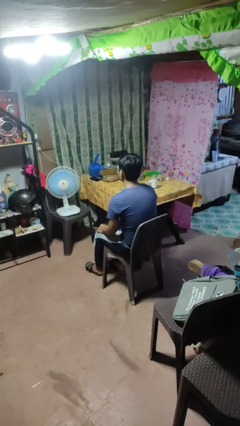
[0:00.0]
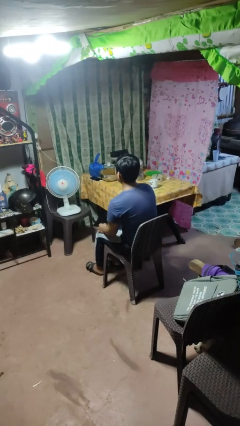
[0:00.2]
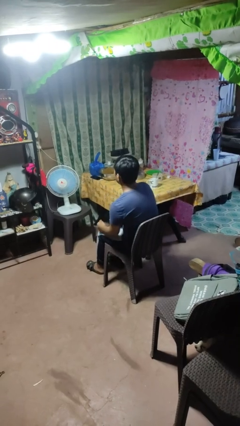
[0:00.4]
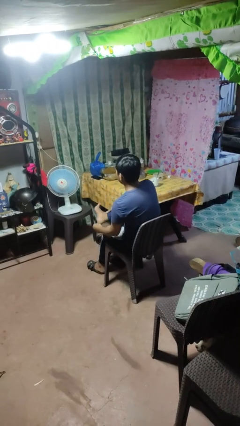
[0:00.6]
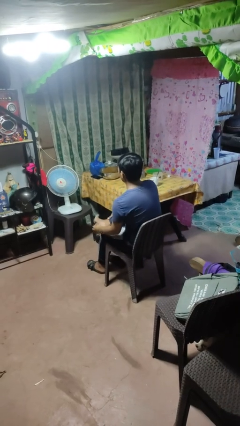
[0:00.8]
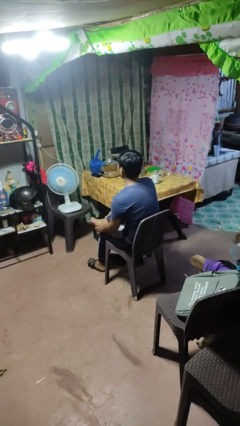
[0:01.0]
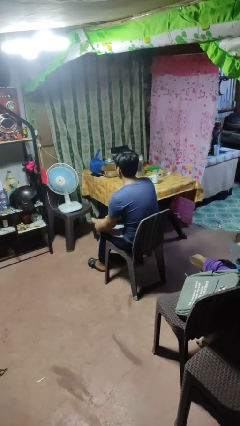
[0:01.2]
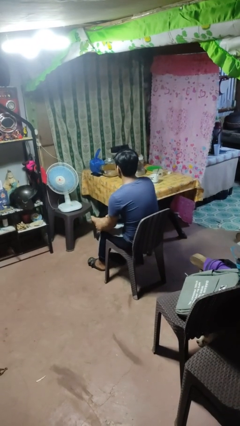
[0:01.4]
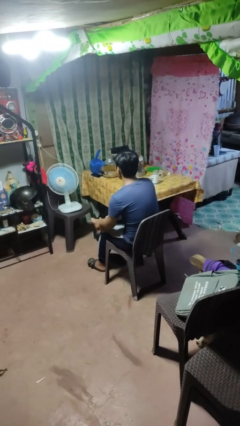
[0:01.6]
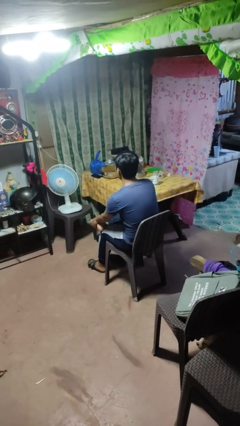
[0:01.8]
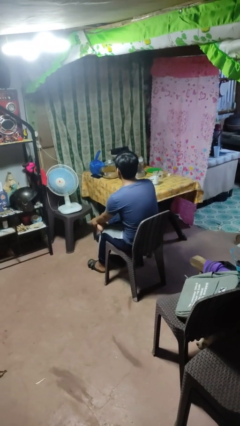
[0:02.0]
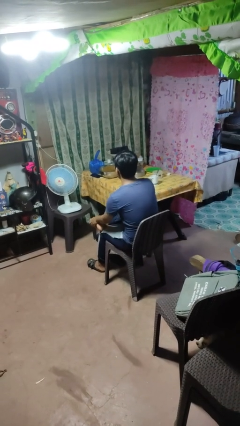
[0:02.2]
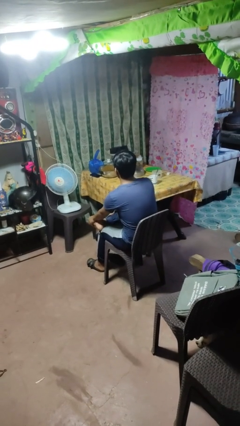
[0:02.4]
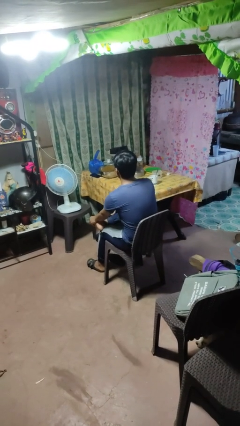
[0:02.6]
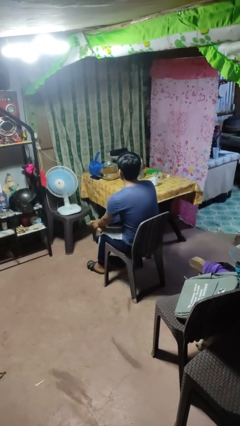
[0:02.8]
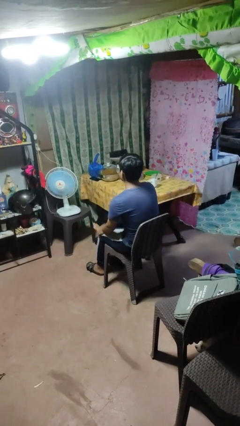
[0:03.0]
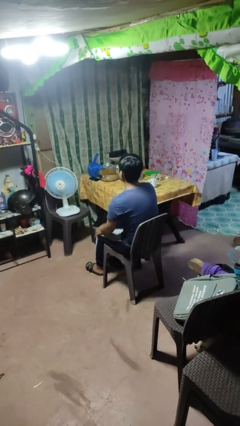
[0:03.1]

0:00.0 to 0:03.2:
person rubs foot

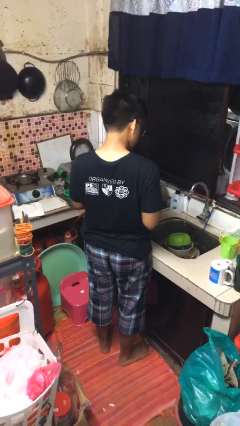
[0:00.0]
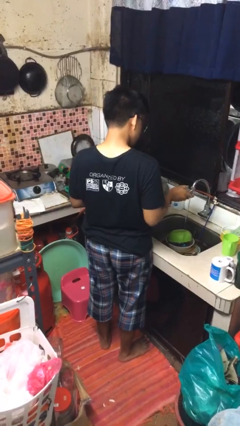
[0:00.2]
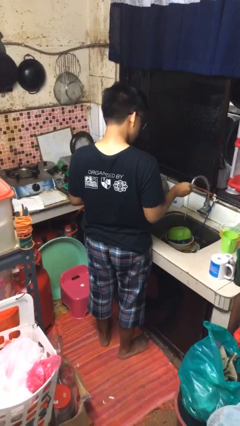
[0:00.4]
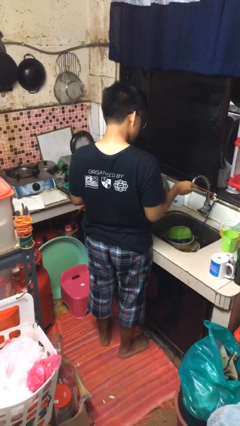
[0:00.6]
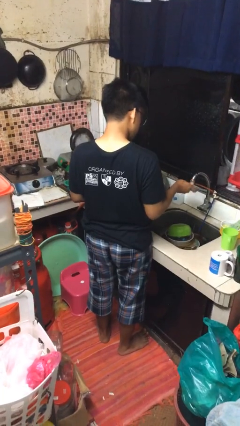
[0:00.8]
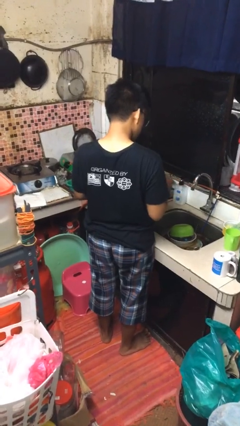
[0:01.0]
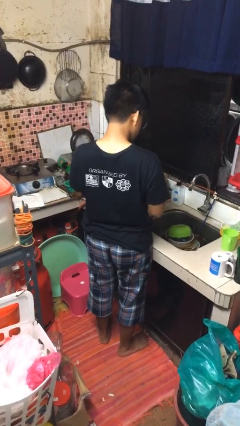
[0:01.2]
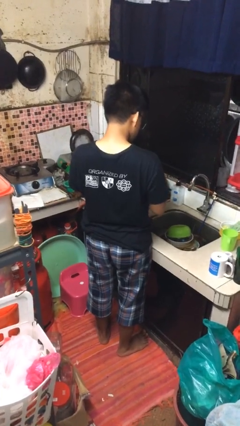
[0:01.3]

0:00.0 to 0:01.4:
person turns off faucet

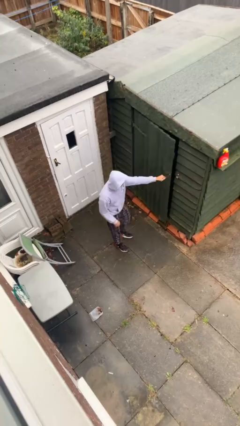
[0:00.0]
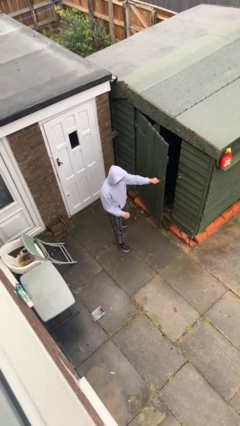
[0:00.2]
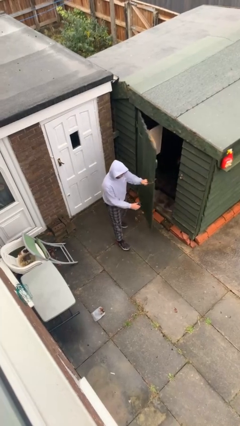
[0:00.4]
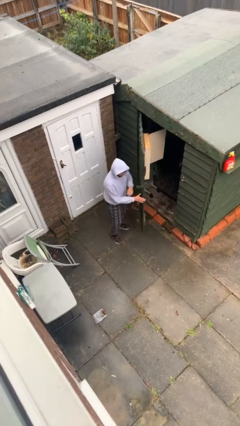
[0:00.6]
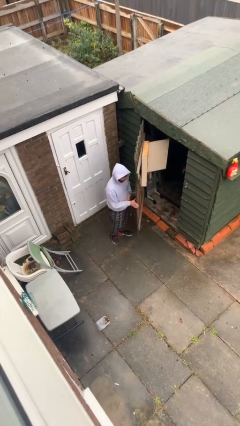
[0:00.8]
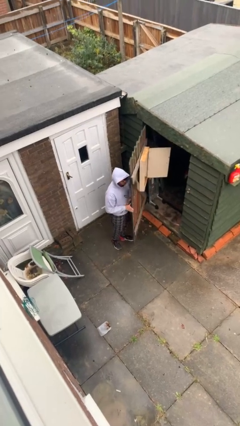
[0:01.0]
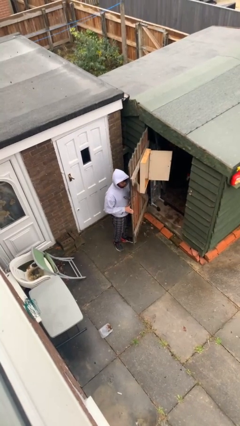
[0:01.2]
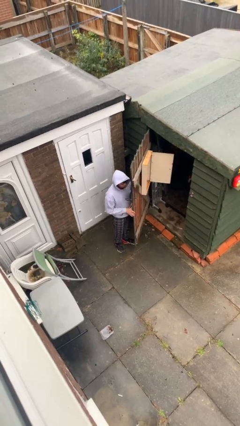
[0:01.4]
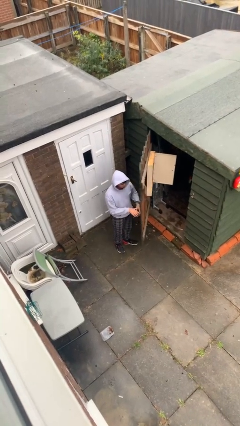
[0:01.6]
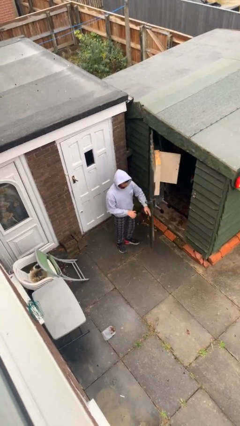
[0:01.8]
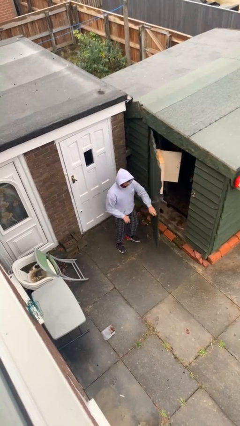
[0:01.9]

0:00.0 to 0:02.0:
person opens facility door

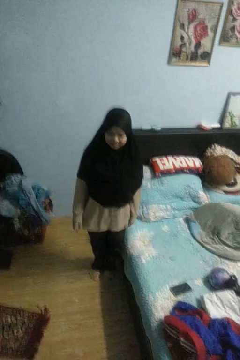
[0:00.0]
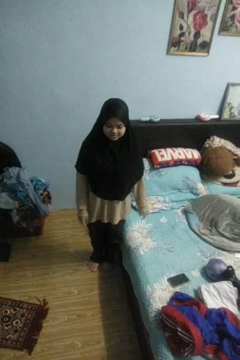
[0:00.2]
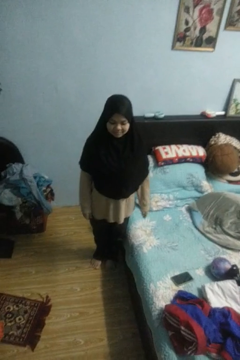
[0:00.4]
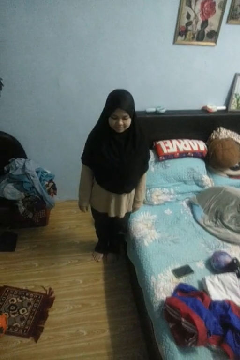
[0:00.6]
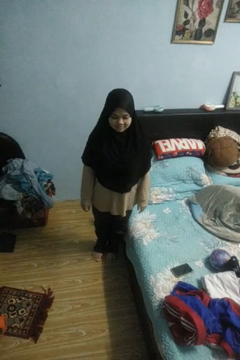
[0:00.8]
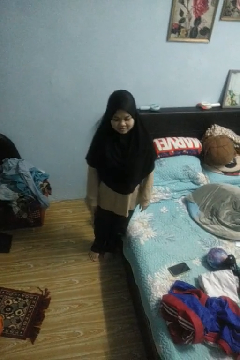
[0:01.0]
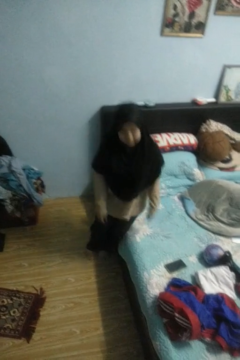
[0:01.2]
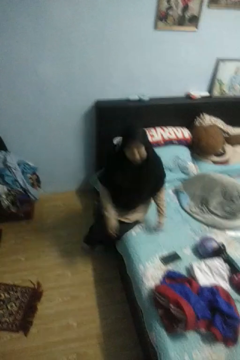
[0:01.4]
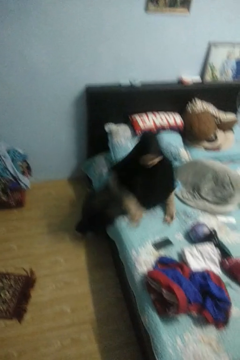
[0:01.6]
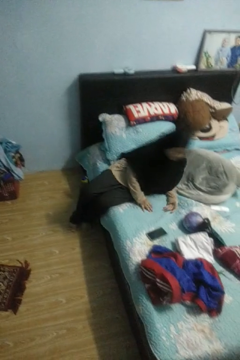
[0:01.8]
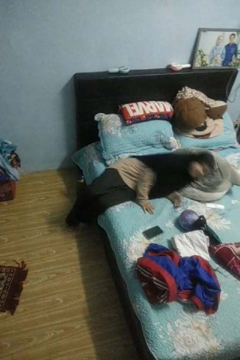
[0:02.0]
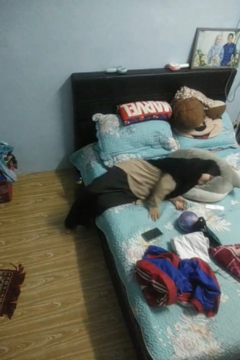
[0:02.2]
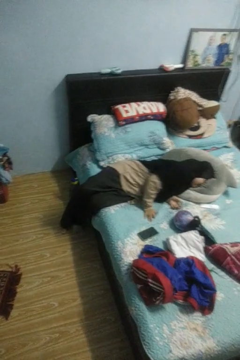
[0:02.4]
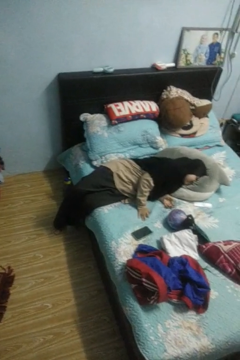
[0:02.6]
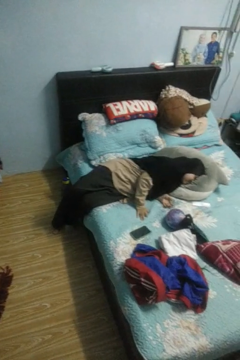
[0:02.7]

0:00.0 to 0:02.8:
person lies down on bed

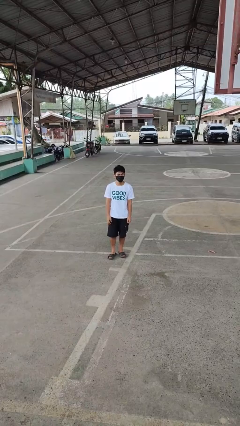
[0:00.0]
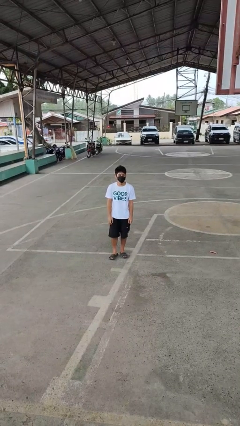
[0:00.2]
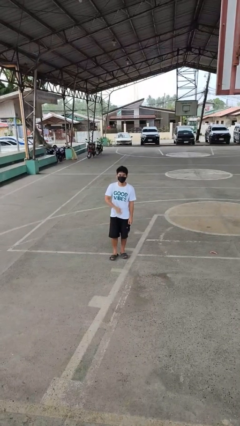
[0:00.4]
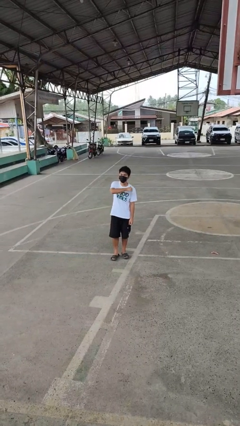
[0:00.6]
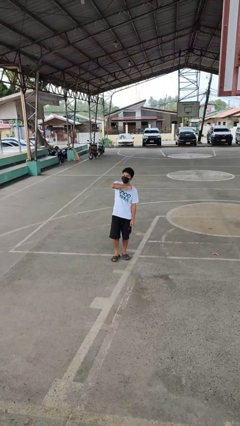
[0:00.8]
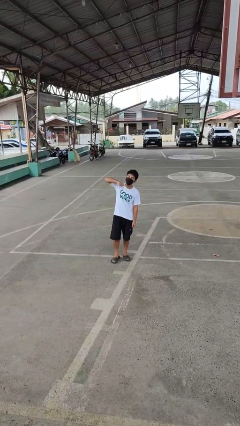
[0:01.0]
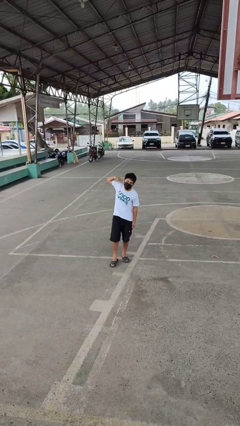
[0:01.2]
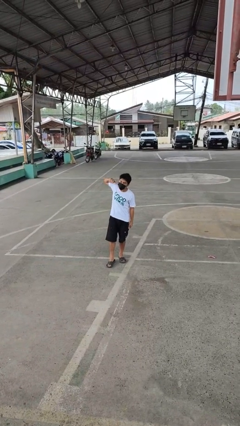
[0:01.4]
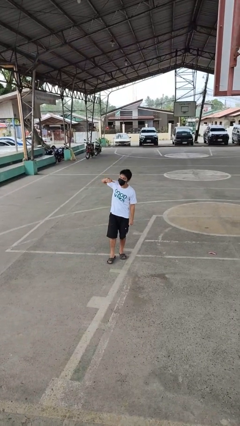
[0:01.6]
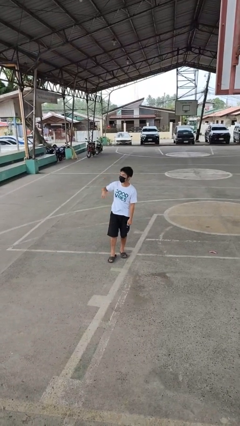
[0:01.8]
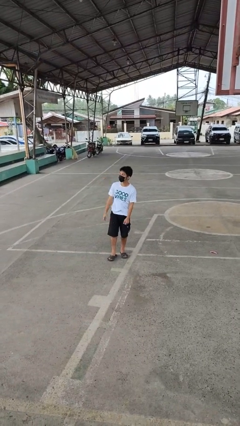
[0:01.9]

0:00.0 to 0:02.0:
person gestures cut

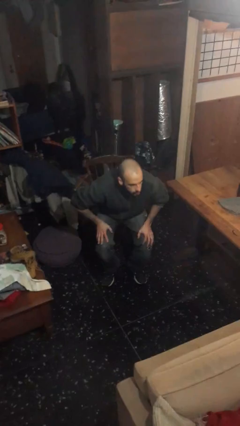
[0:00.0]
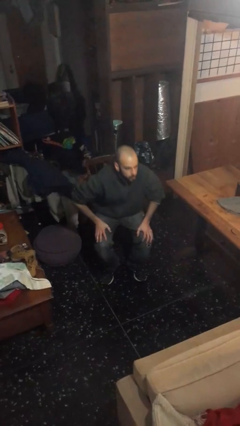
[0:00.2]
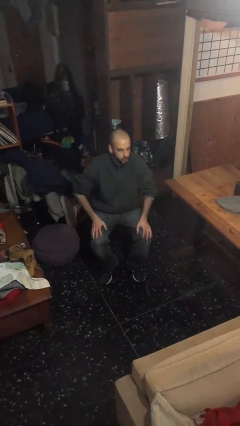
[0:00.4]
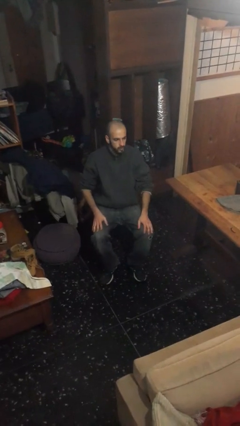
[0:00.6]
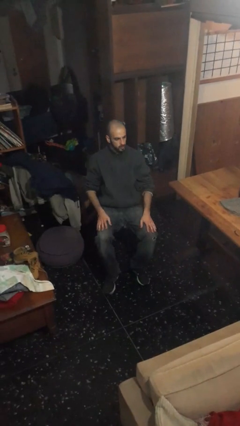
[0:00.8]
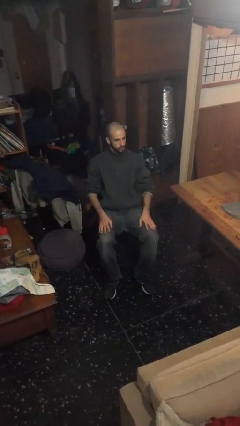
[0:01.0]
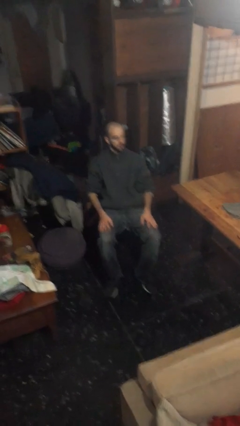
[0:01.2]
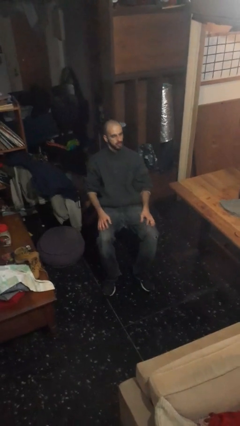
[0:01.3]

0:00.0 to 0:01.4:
person sits down

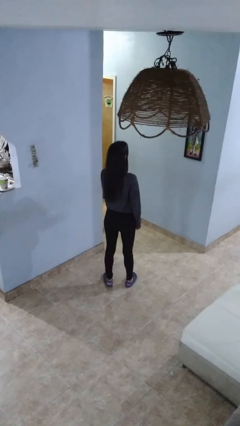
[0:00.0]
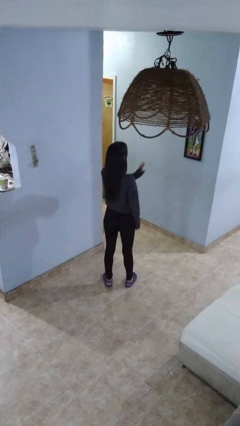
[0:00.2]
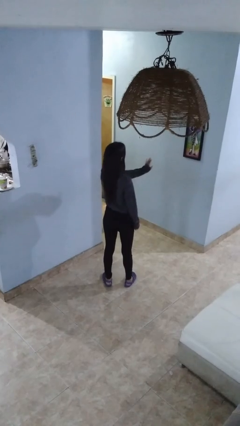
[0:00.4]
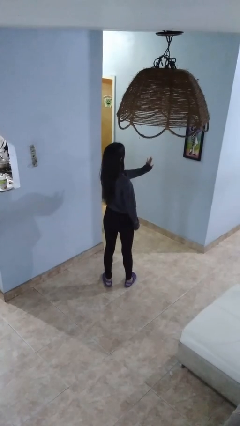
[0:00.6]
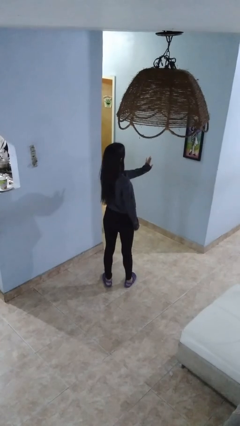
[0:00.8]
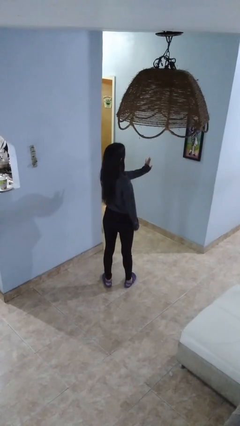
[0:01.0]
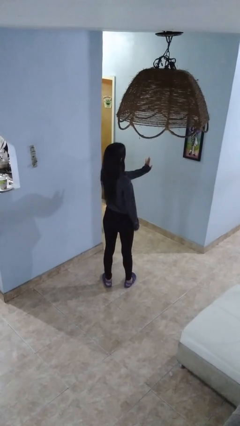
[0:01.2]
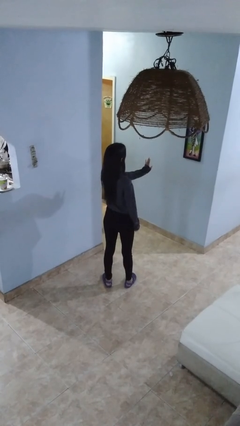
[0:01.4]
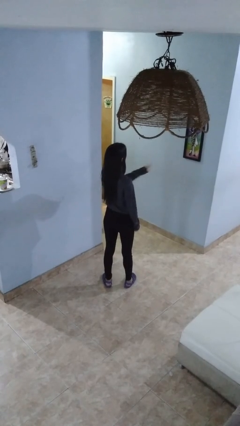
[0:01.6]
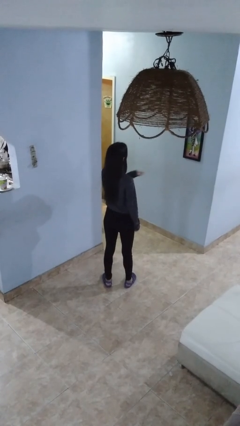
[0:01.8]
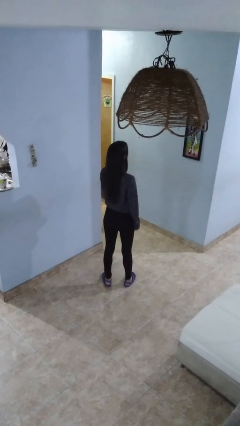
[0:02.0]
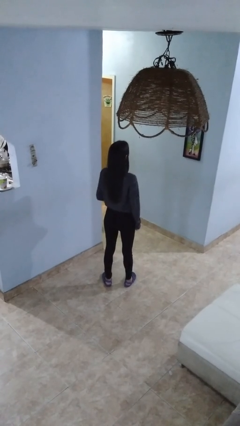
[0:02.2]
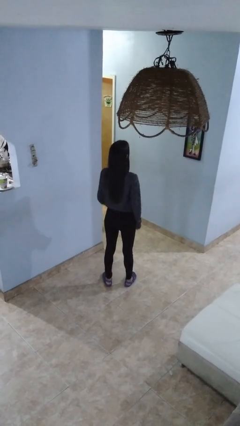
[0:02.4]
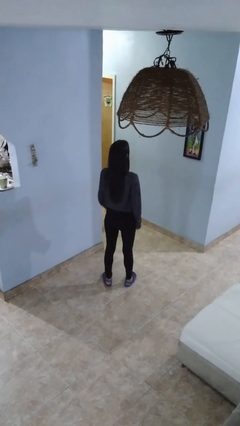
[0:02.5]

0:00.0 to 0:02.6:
person gestures stop

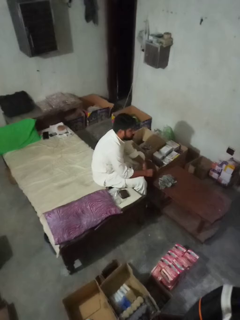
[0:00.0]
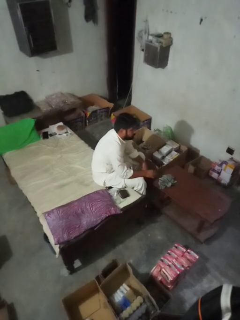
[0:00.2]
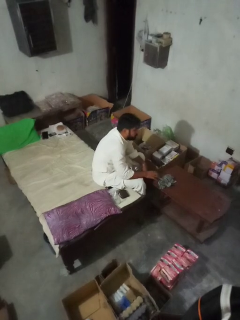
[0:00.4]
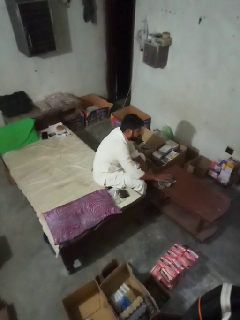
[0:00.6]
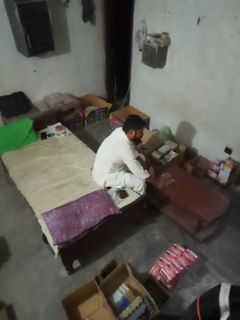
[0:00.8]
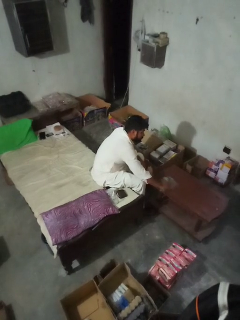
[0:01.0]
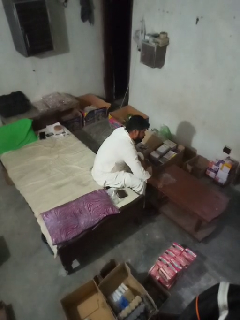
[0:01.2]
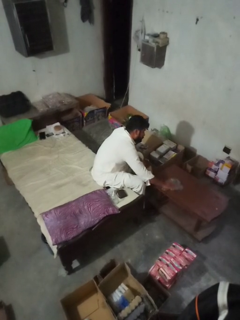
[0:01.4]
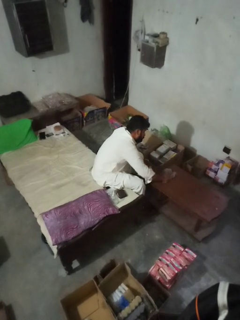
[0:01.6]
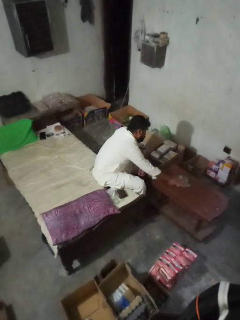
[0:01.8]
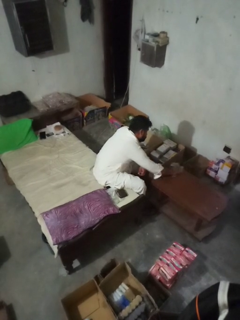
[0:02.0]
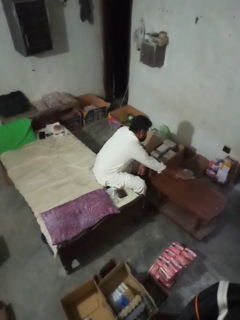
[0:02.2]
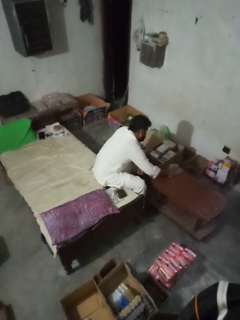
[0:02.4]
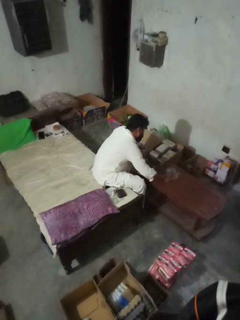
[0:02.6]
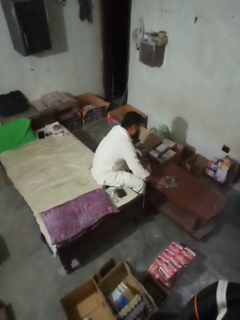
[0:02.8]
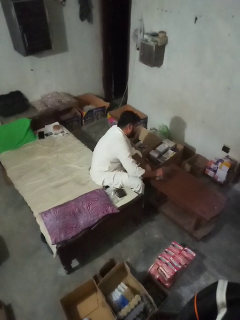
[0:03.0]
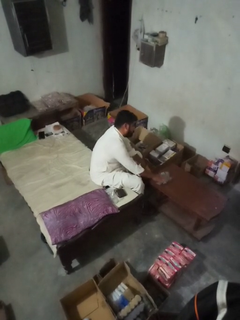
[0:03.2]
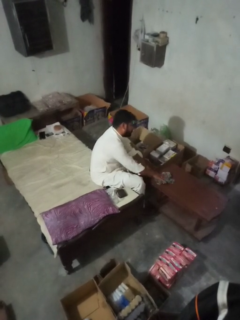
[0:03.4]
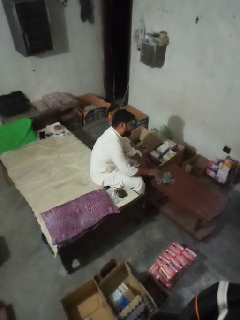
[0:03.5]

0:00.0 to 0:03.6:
person cleans table with rag
